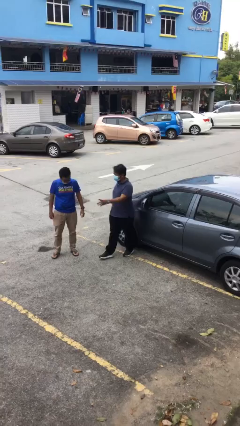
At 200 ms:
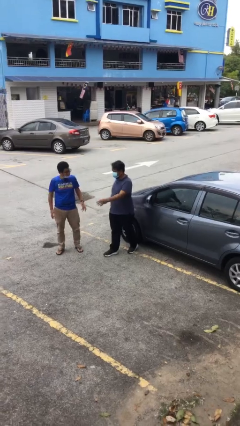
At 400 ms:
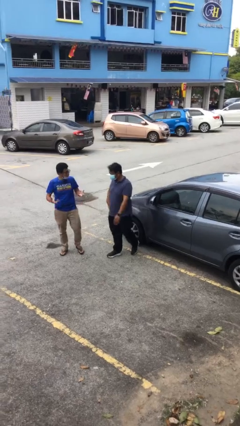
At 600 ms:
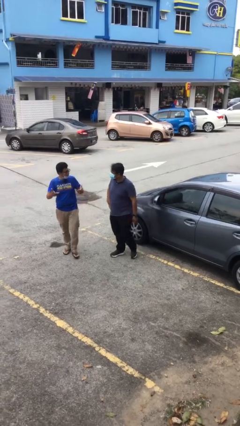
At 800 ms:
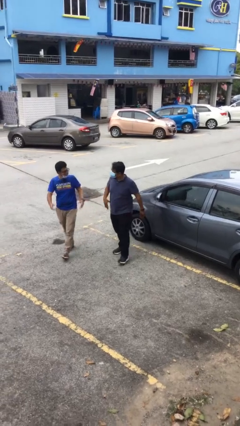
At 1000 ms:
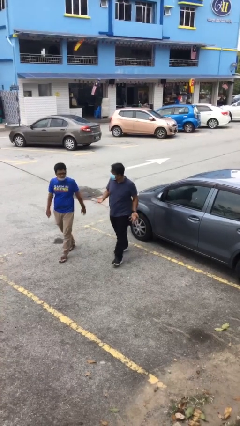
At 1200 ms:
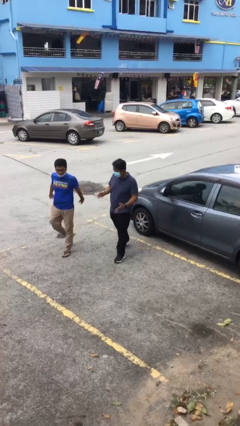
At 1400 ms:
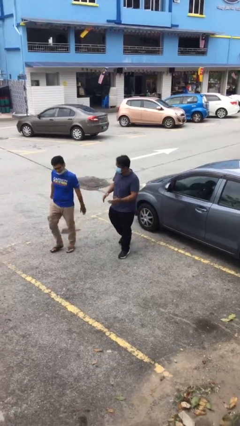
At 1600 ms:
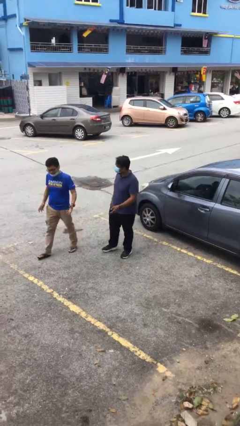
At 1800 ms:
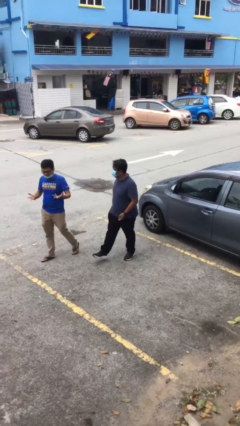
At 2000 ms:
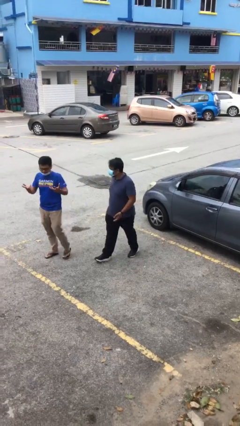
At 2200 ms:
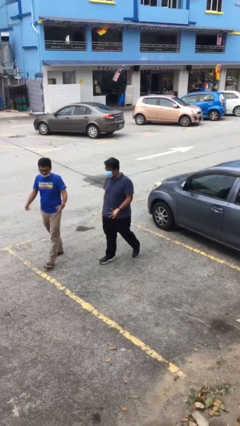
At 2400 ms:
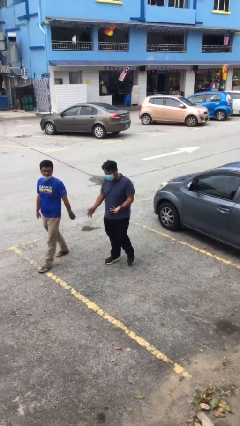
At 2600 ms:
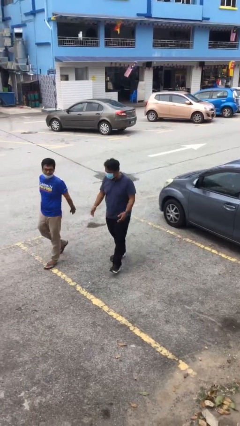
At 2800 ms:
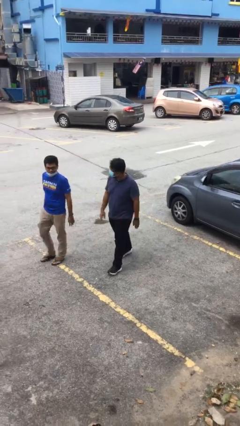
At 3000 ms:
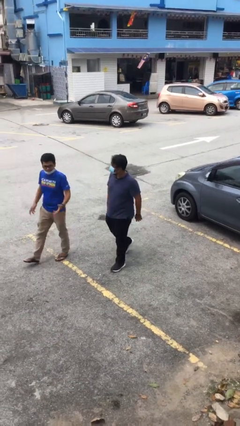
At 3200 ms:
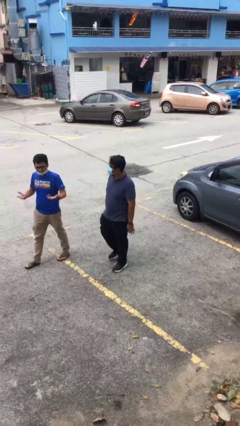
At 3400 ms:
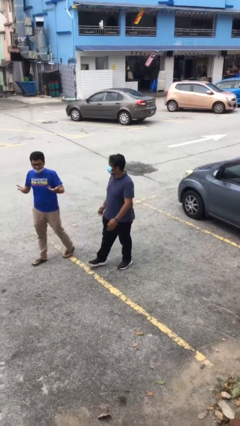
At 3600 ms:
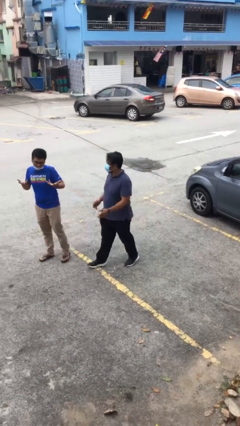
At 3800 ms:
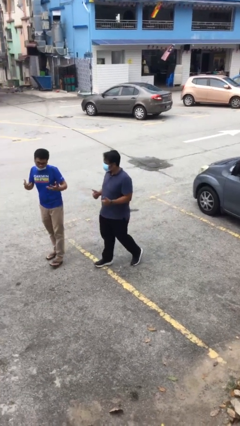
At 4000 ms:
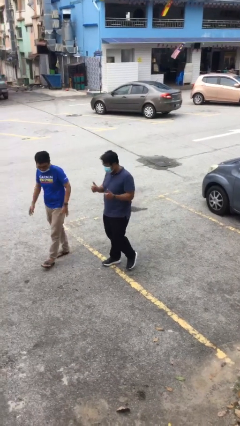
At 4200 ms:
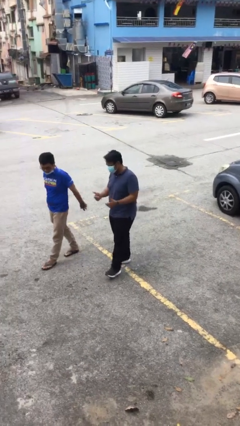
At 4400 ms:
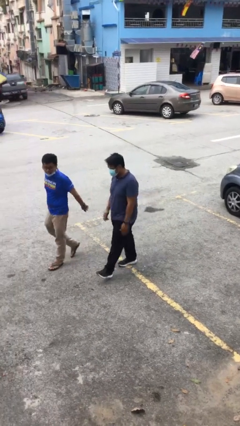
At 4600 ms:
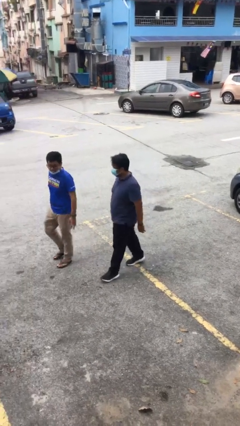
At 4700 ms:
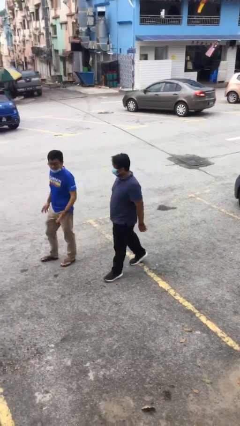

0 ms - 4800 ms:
person talks to person

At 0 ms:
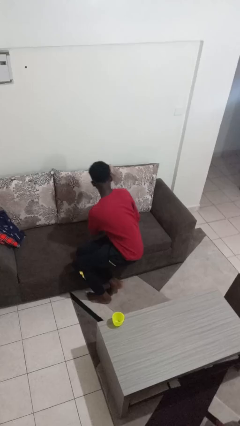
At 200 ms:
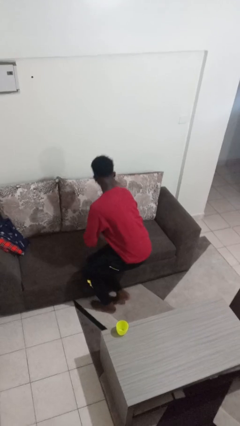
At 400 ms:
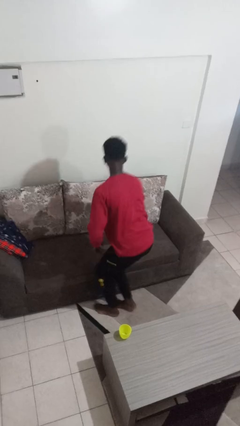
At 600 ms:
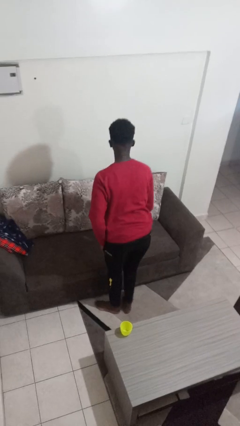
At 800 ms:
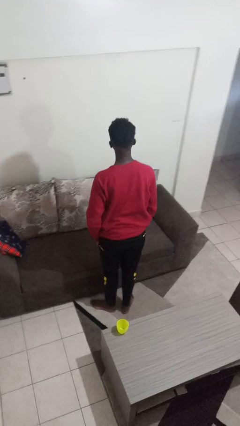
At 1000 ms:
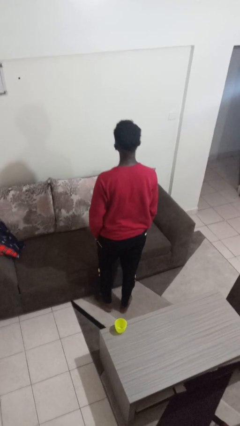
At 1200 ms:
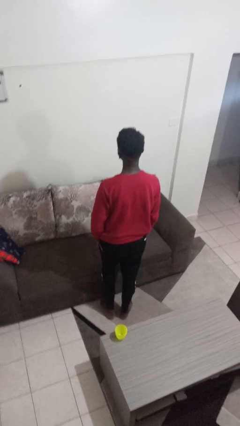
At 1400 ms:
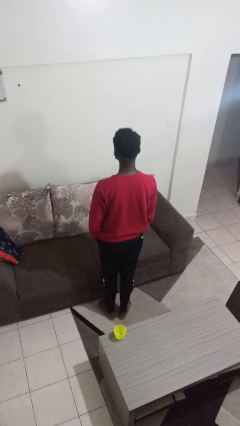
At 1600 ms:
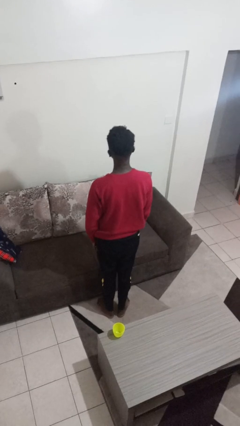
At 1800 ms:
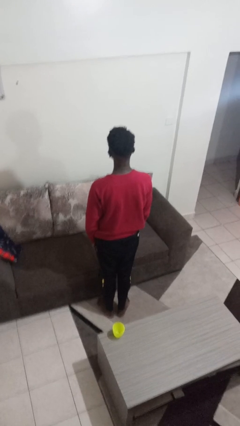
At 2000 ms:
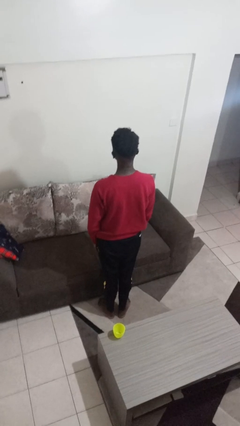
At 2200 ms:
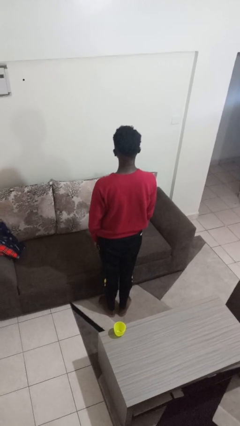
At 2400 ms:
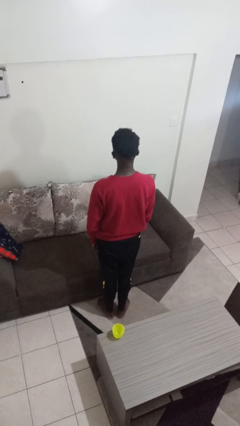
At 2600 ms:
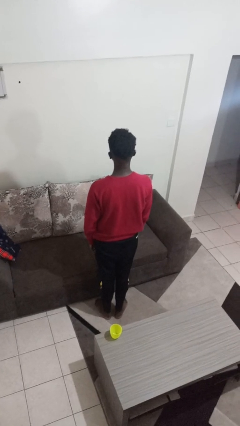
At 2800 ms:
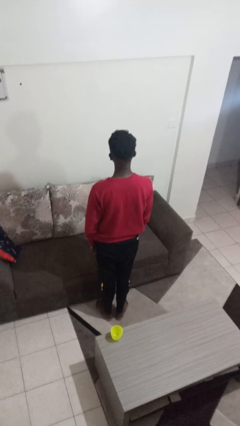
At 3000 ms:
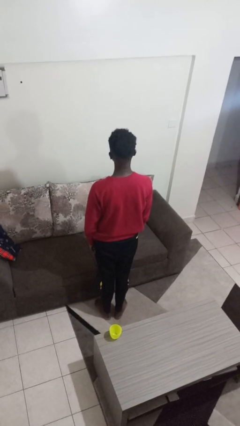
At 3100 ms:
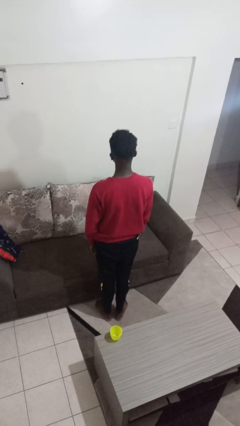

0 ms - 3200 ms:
person stands up

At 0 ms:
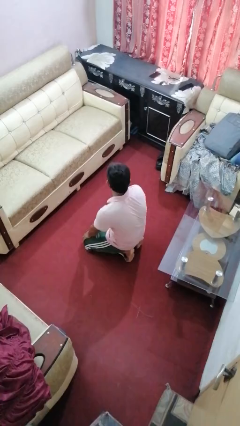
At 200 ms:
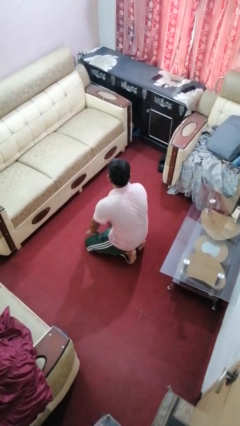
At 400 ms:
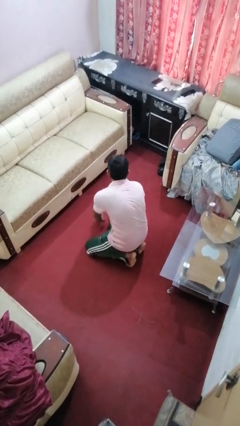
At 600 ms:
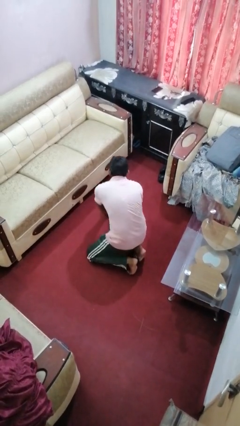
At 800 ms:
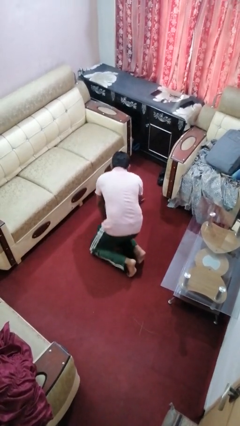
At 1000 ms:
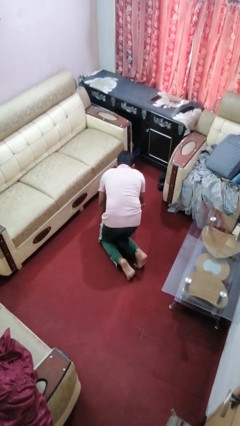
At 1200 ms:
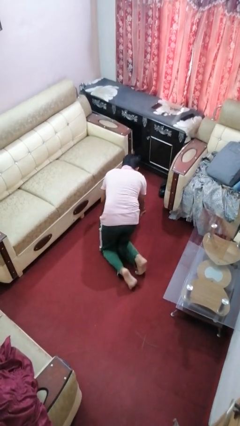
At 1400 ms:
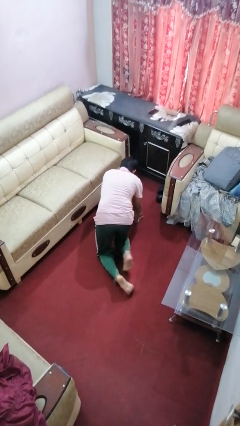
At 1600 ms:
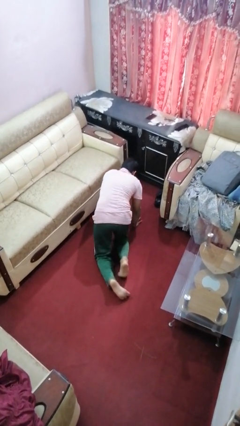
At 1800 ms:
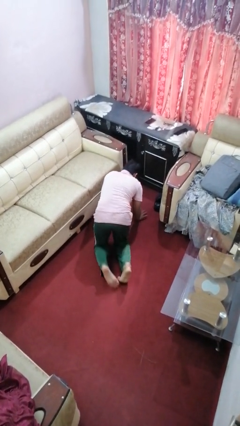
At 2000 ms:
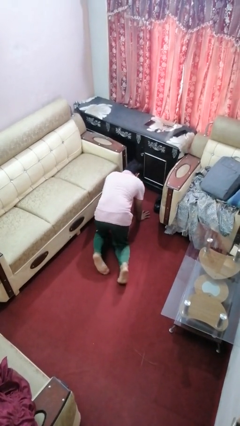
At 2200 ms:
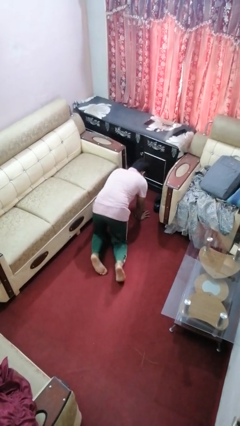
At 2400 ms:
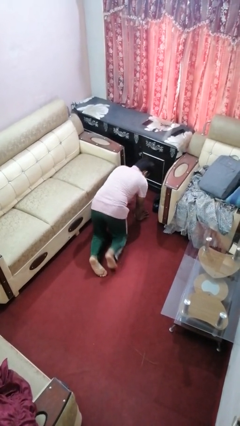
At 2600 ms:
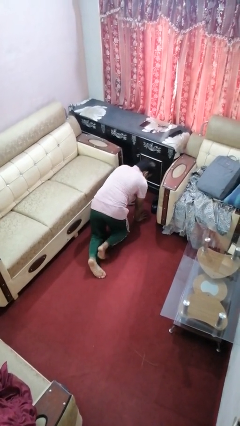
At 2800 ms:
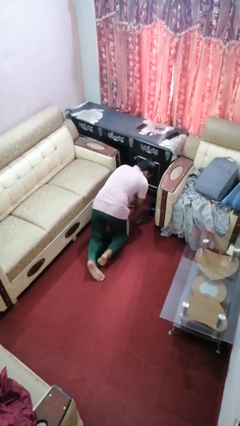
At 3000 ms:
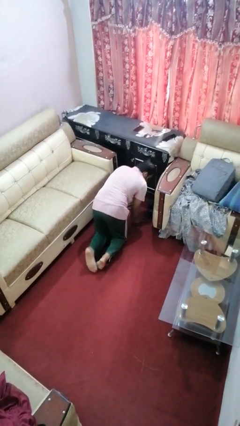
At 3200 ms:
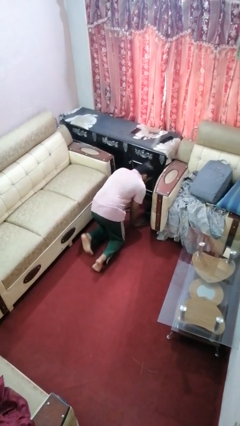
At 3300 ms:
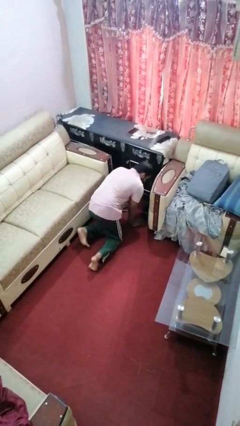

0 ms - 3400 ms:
person crawls

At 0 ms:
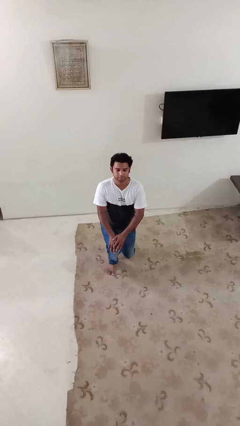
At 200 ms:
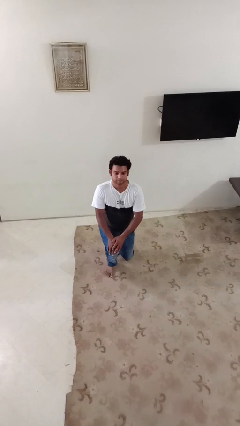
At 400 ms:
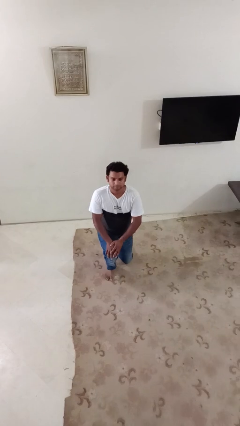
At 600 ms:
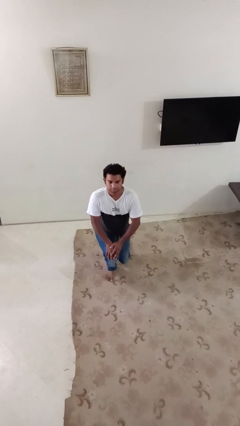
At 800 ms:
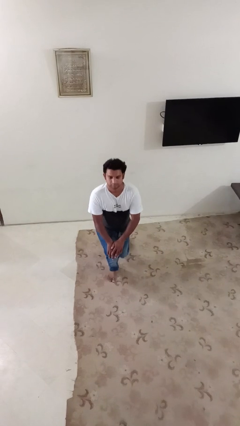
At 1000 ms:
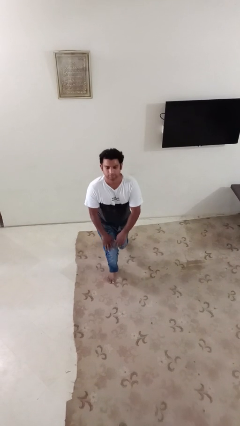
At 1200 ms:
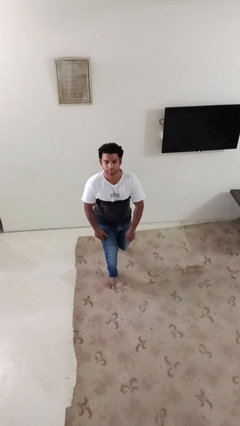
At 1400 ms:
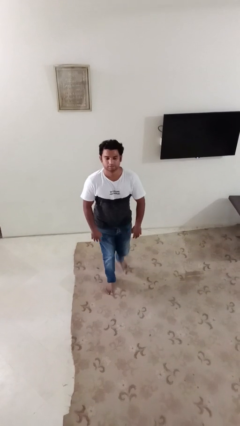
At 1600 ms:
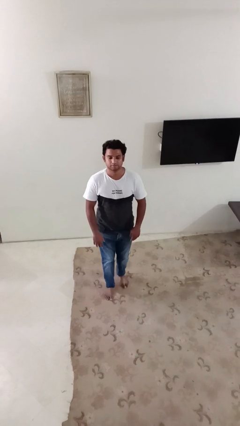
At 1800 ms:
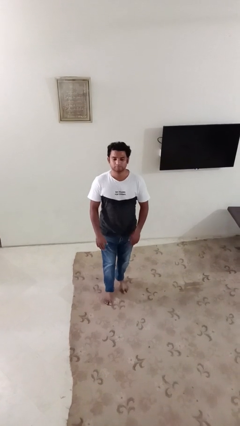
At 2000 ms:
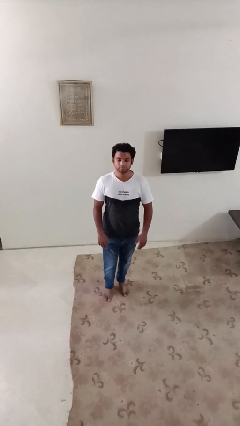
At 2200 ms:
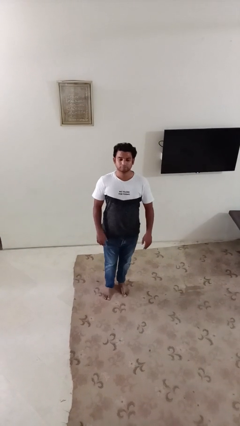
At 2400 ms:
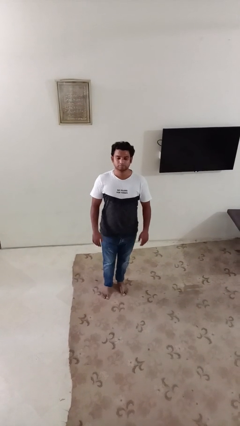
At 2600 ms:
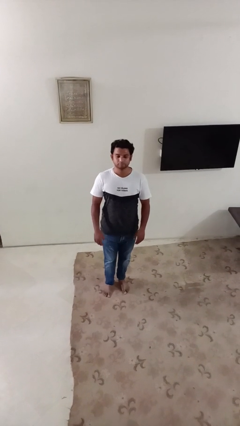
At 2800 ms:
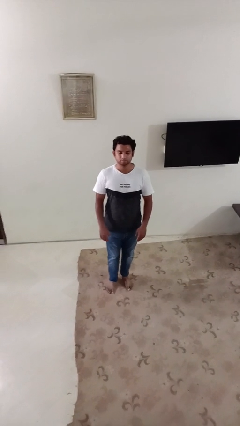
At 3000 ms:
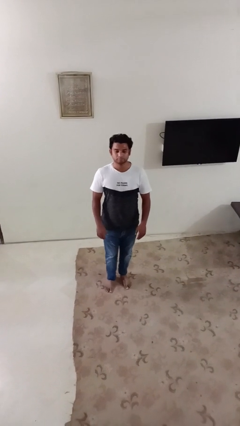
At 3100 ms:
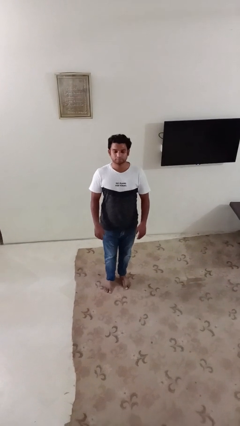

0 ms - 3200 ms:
person stands up from floor

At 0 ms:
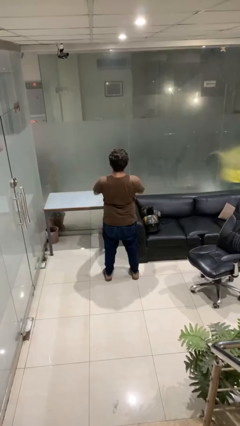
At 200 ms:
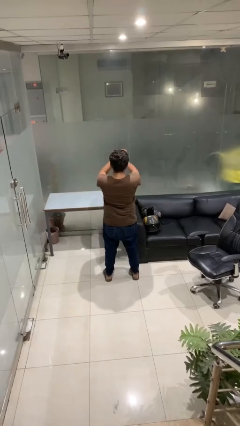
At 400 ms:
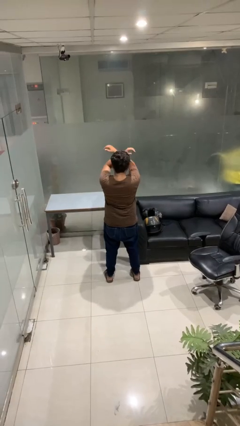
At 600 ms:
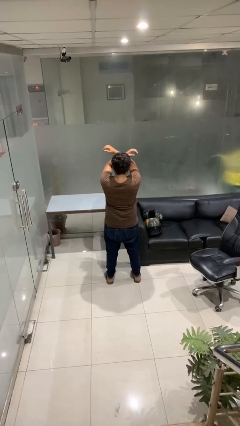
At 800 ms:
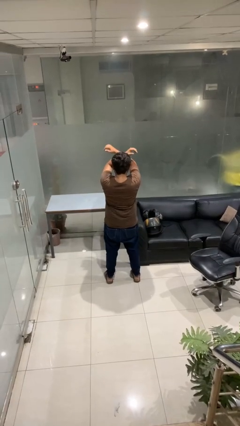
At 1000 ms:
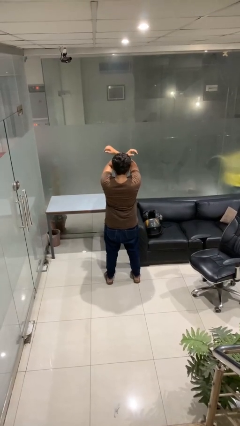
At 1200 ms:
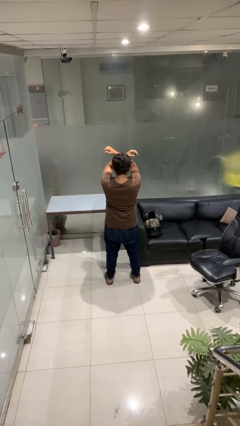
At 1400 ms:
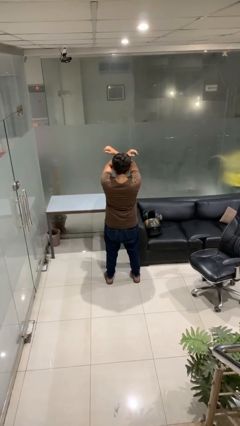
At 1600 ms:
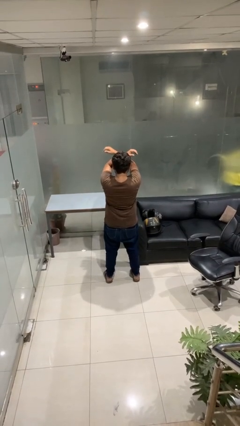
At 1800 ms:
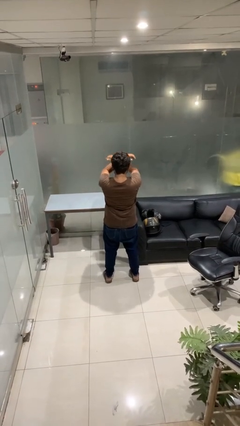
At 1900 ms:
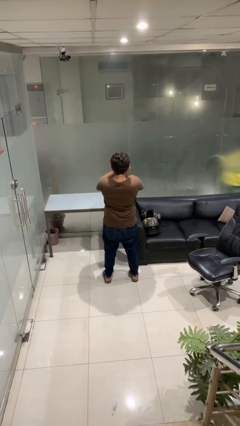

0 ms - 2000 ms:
person gestures arms x

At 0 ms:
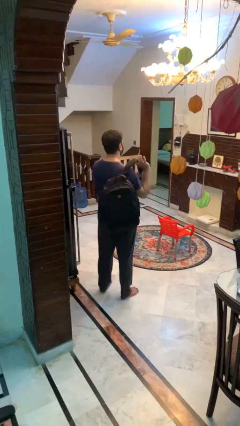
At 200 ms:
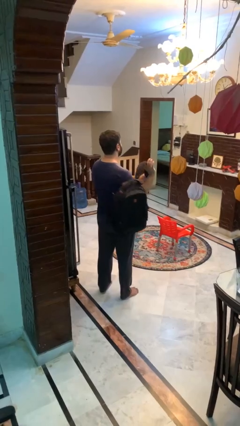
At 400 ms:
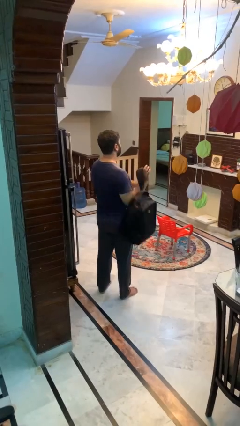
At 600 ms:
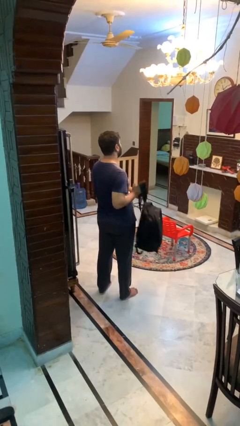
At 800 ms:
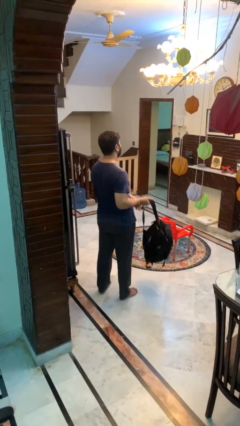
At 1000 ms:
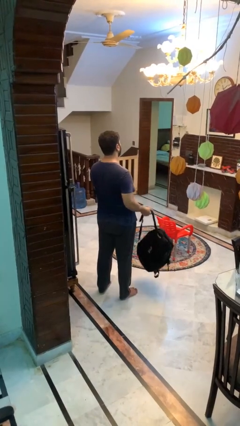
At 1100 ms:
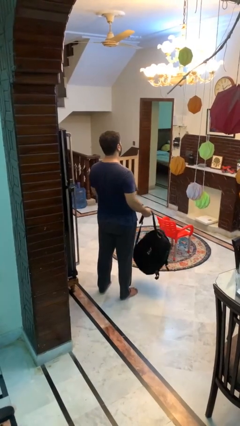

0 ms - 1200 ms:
person takes off backpack
